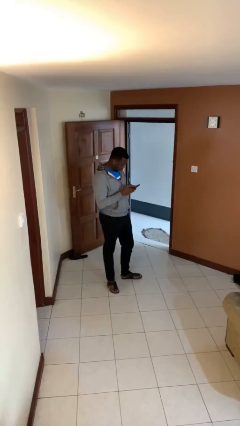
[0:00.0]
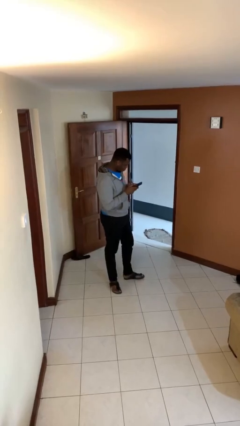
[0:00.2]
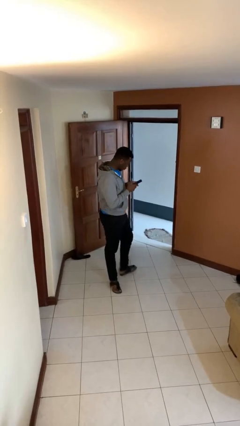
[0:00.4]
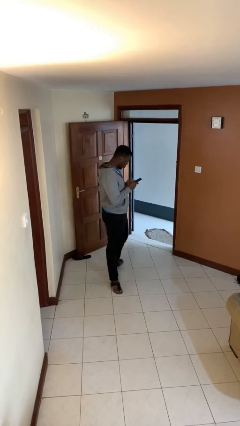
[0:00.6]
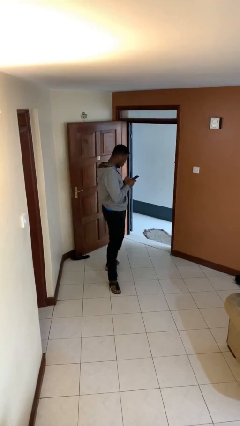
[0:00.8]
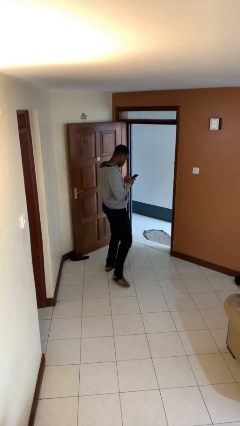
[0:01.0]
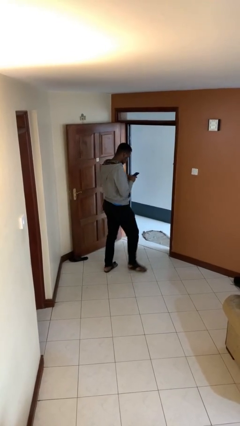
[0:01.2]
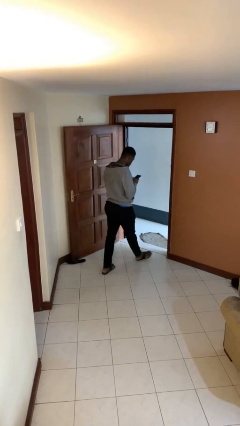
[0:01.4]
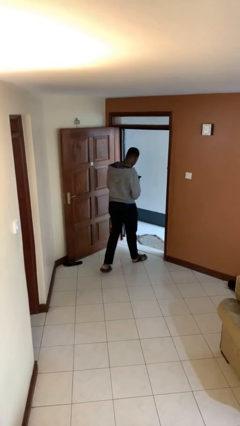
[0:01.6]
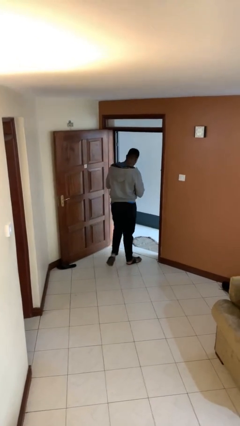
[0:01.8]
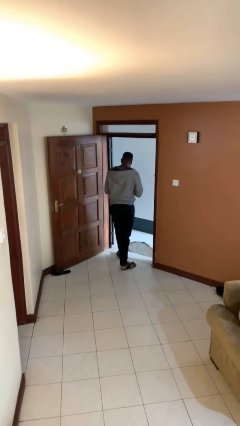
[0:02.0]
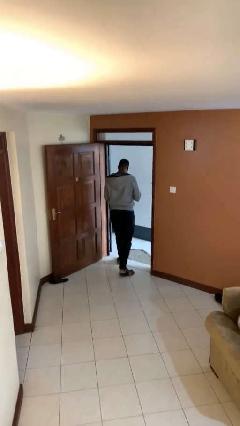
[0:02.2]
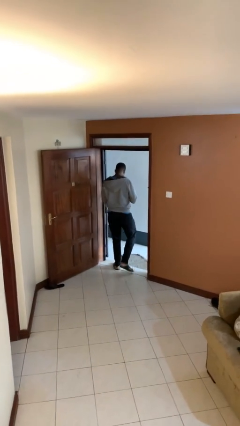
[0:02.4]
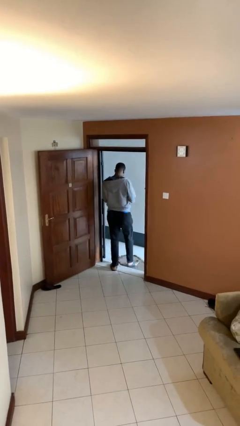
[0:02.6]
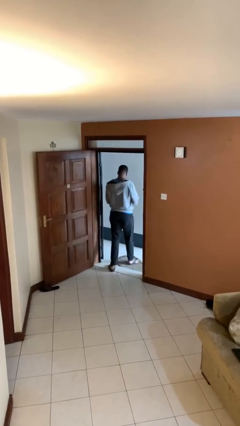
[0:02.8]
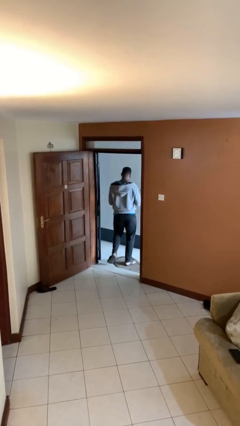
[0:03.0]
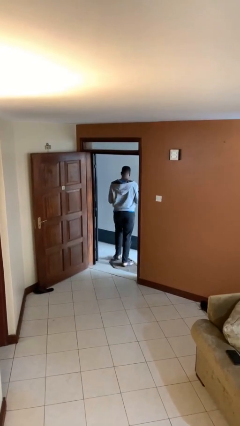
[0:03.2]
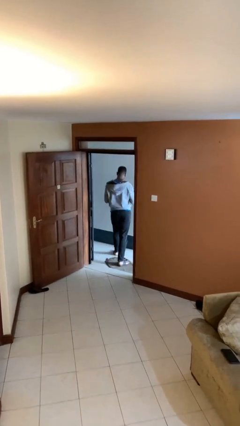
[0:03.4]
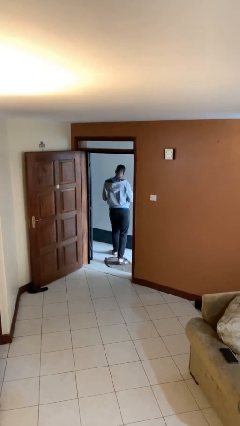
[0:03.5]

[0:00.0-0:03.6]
person exits scene through structure

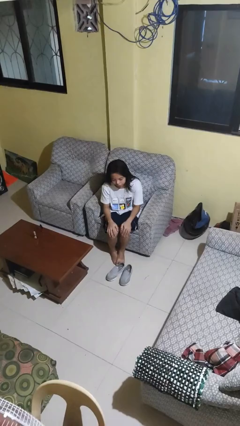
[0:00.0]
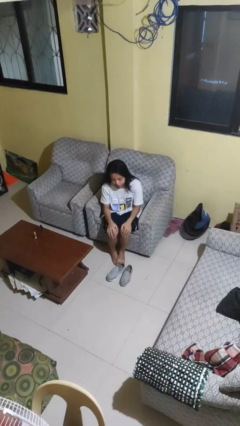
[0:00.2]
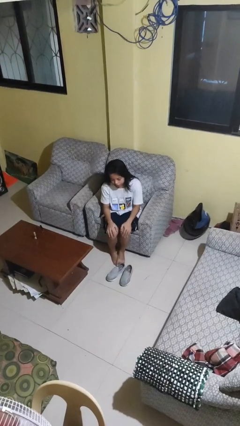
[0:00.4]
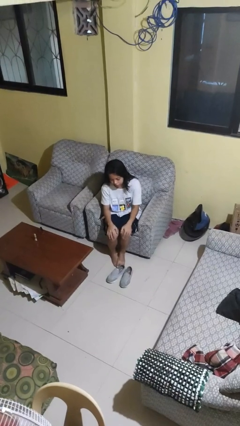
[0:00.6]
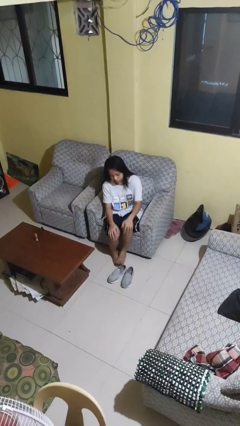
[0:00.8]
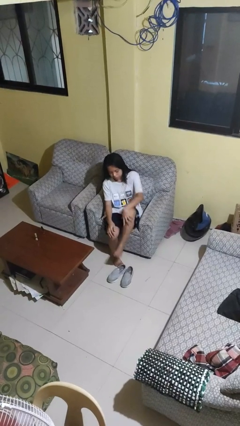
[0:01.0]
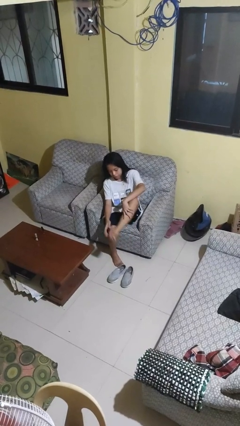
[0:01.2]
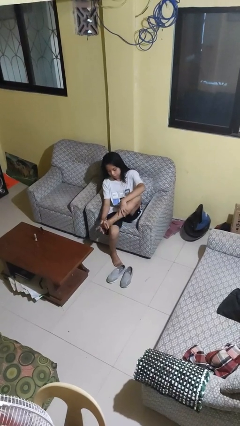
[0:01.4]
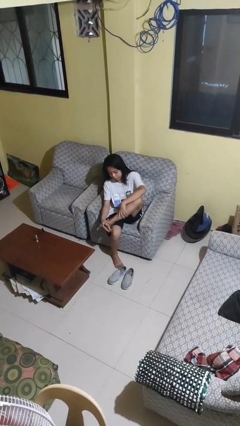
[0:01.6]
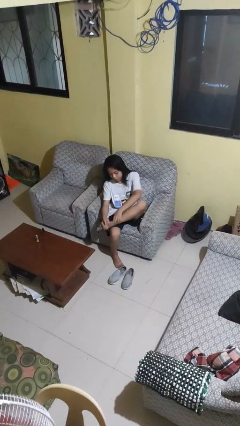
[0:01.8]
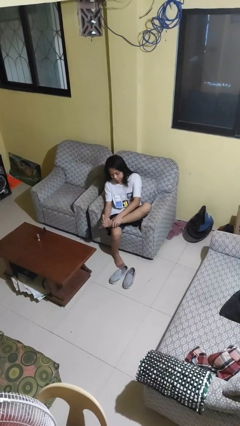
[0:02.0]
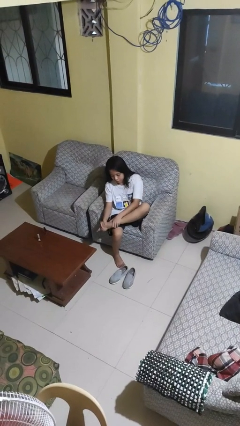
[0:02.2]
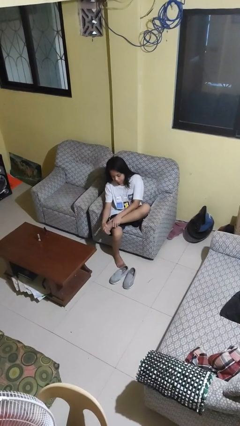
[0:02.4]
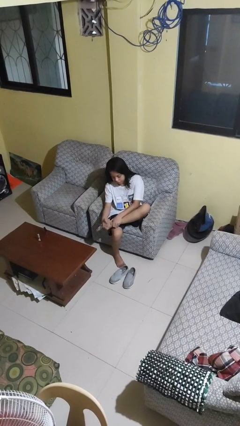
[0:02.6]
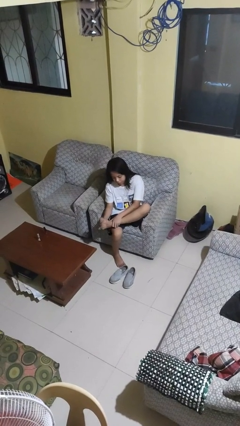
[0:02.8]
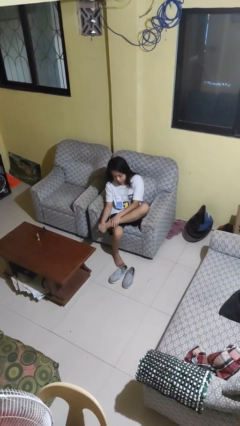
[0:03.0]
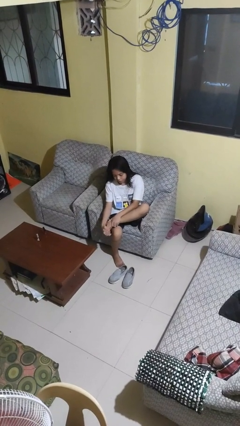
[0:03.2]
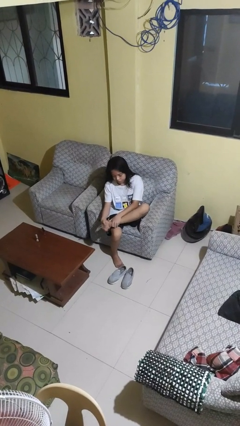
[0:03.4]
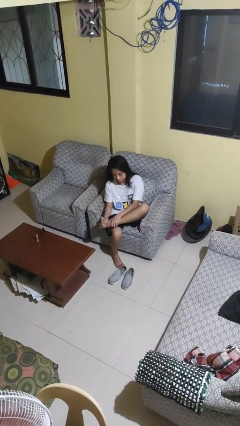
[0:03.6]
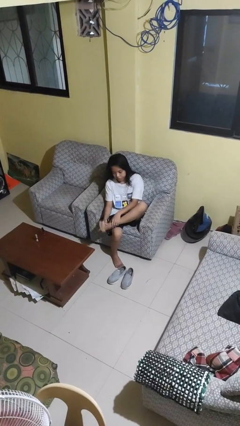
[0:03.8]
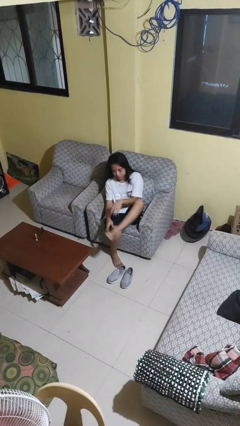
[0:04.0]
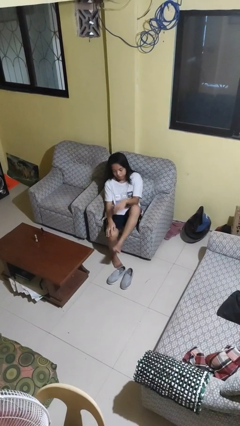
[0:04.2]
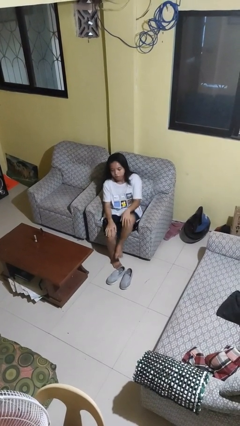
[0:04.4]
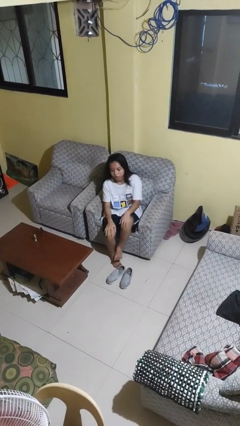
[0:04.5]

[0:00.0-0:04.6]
person rubs foot

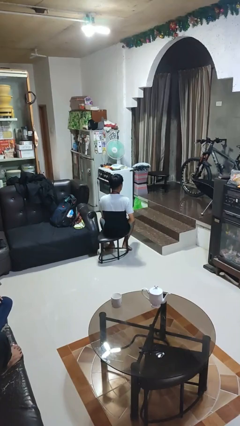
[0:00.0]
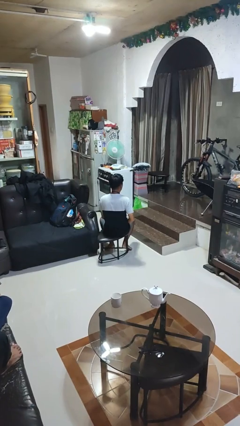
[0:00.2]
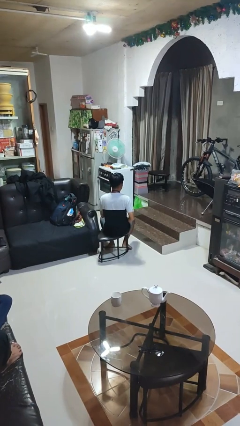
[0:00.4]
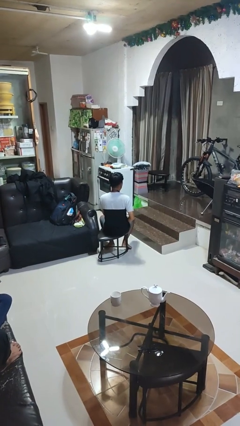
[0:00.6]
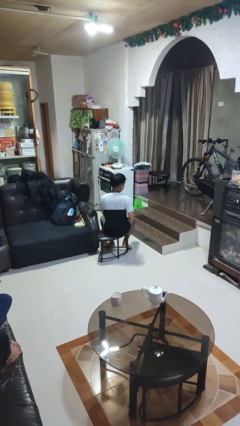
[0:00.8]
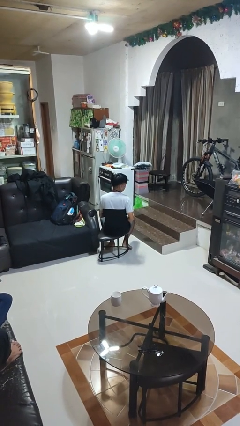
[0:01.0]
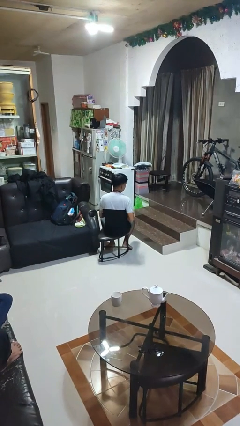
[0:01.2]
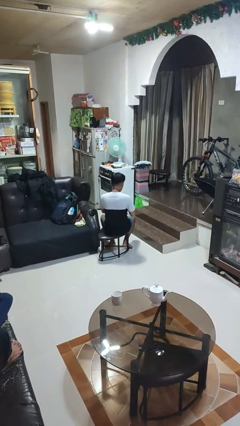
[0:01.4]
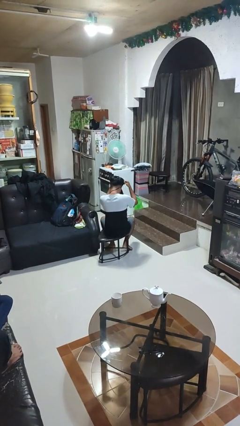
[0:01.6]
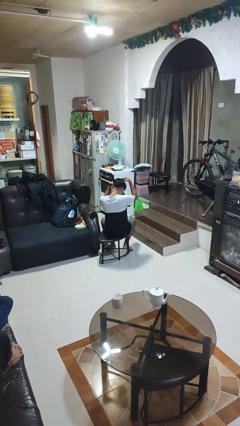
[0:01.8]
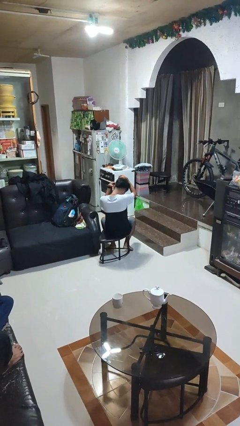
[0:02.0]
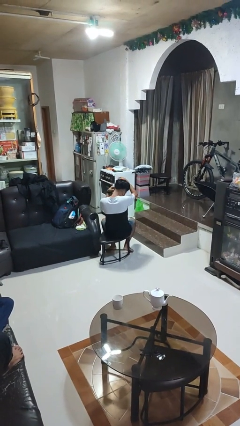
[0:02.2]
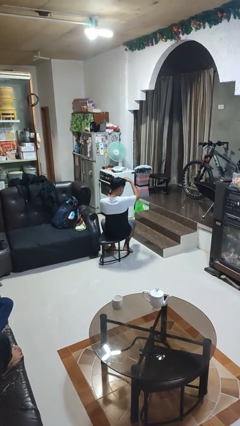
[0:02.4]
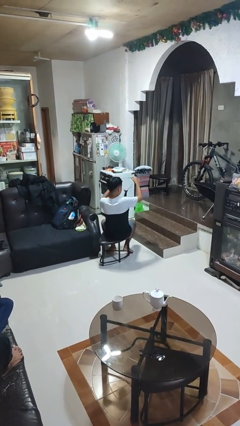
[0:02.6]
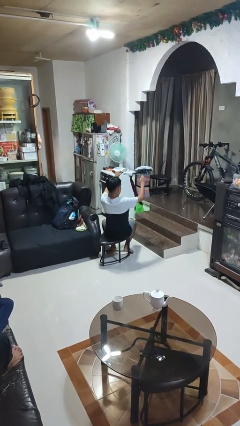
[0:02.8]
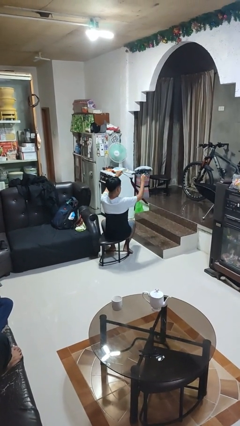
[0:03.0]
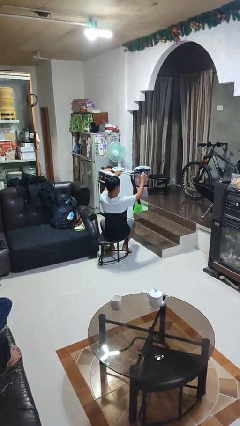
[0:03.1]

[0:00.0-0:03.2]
person takes off necktie

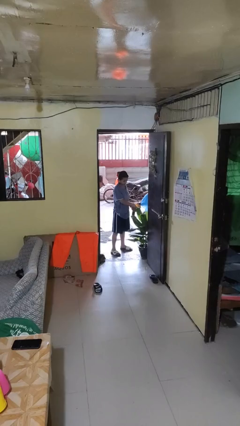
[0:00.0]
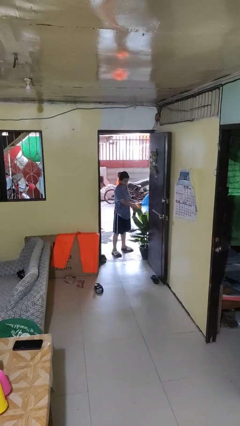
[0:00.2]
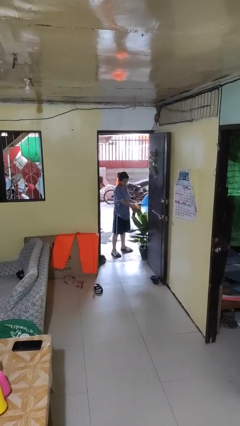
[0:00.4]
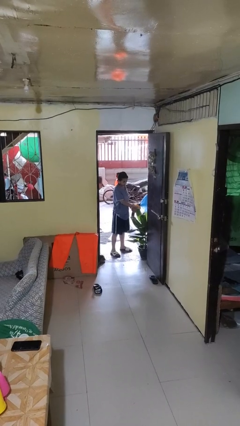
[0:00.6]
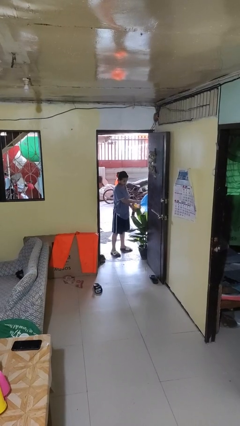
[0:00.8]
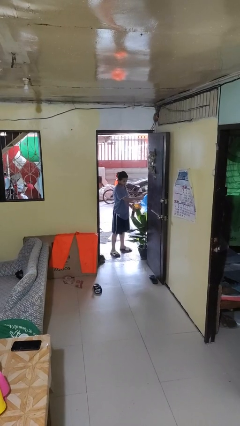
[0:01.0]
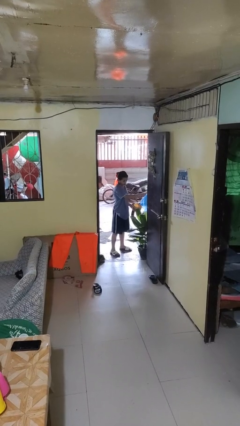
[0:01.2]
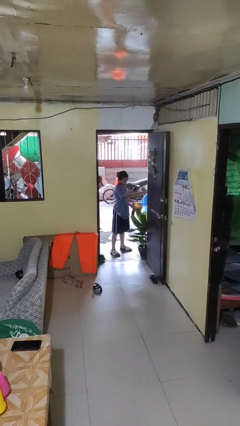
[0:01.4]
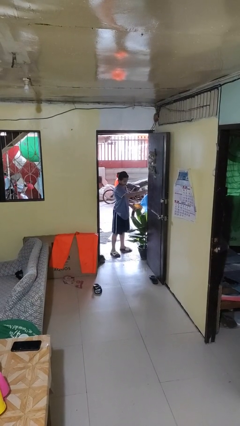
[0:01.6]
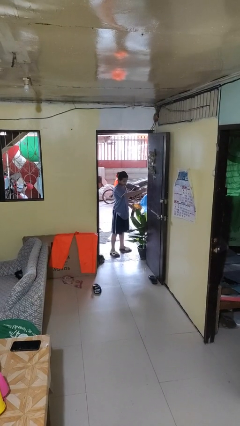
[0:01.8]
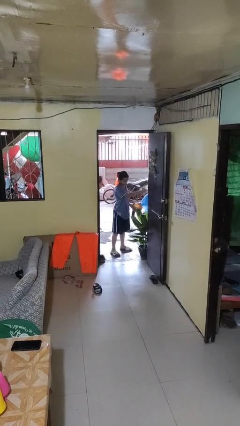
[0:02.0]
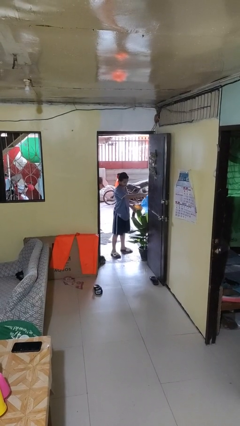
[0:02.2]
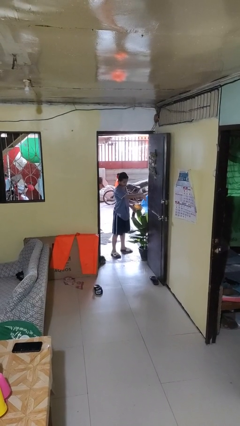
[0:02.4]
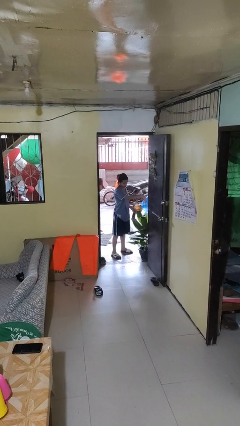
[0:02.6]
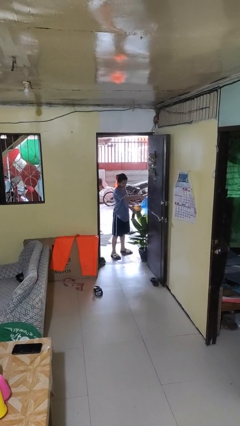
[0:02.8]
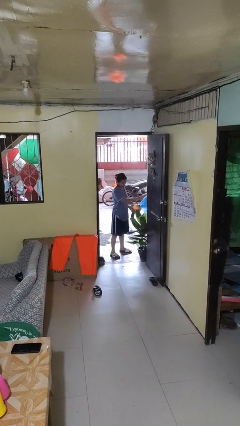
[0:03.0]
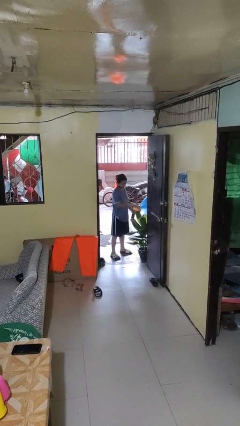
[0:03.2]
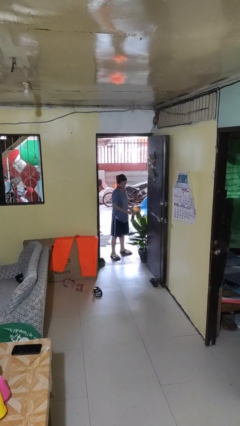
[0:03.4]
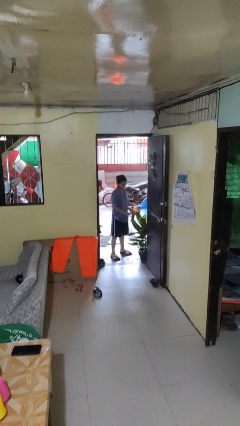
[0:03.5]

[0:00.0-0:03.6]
person waters houseplant

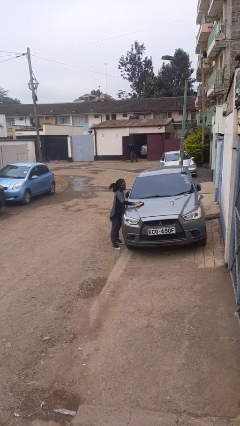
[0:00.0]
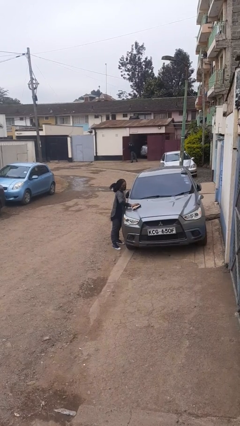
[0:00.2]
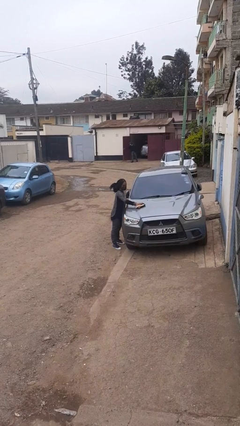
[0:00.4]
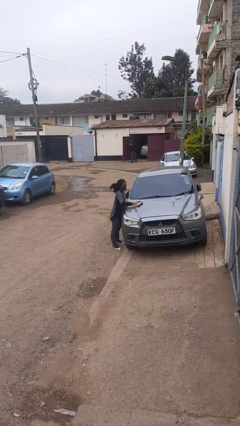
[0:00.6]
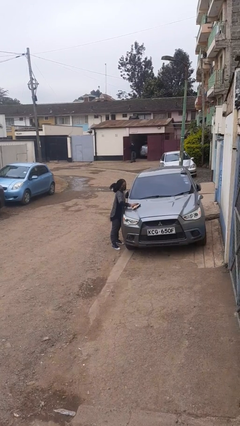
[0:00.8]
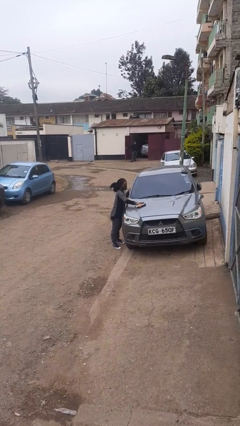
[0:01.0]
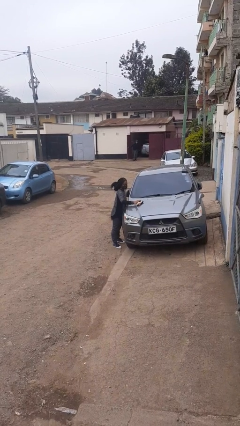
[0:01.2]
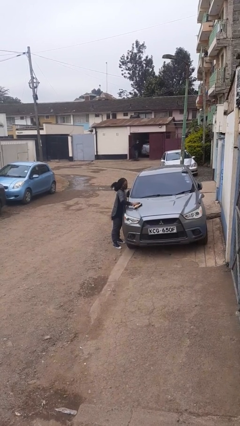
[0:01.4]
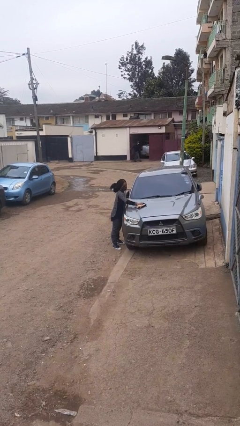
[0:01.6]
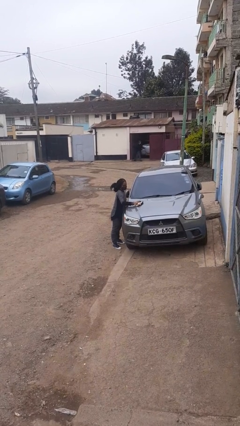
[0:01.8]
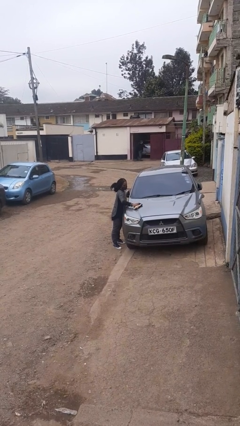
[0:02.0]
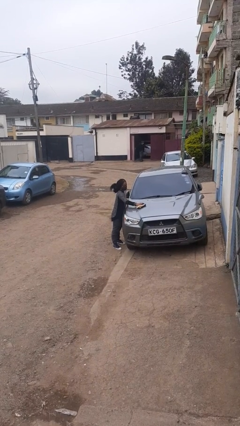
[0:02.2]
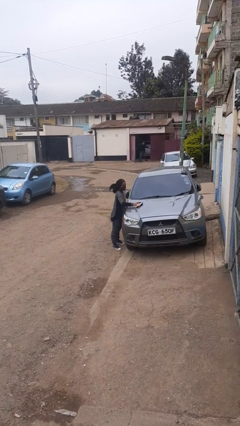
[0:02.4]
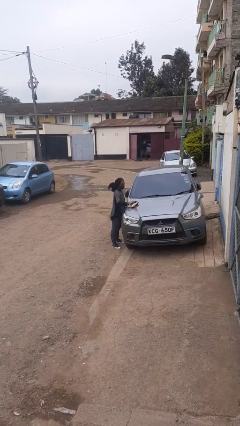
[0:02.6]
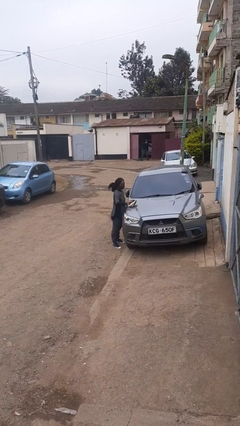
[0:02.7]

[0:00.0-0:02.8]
person polishes car with rag
